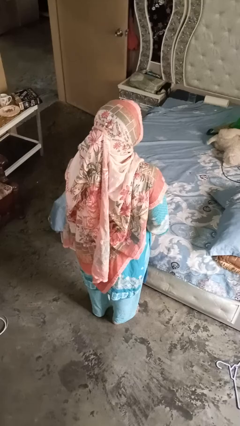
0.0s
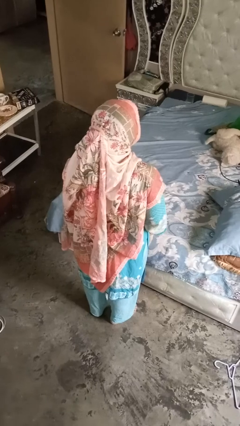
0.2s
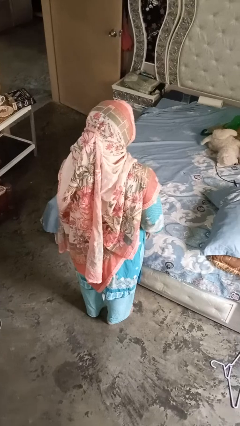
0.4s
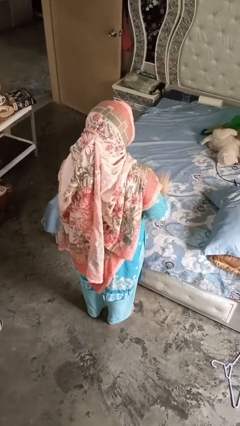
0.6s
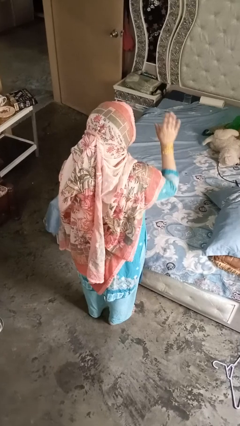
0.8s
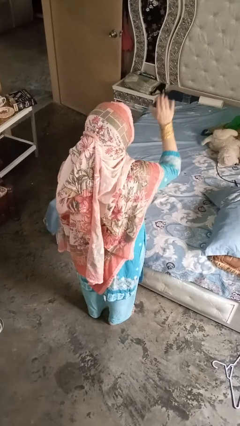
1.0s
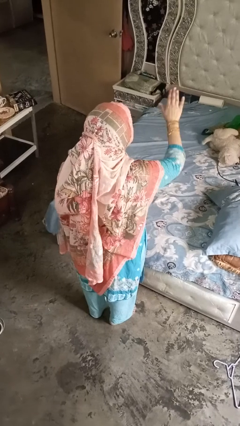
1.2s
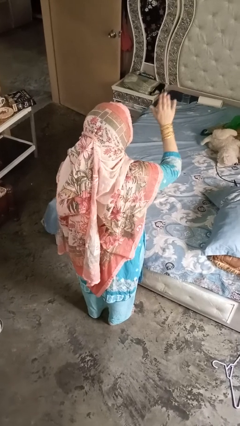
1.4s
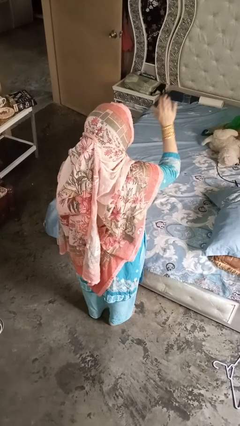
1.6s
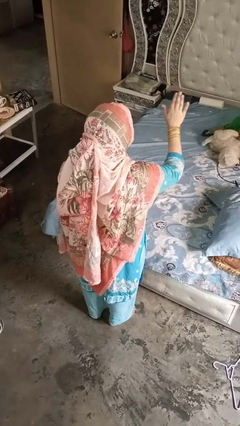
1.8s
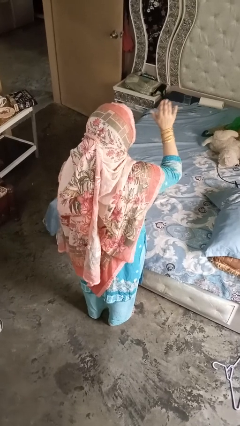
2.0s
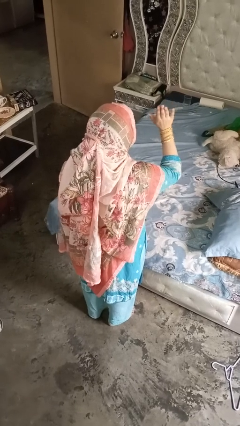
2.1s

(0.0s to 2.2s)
person gestures stop

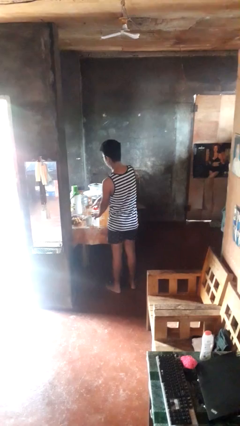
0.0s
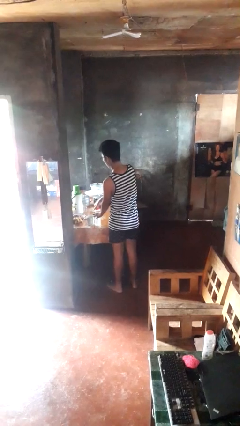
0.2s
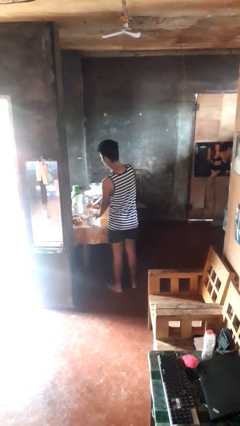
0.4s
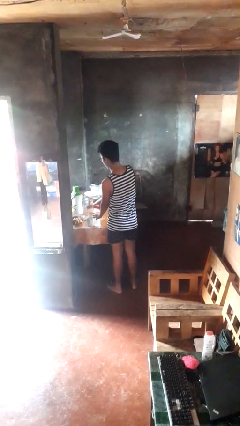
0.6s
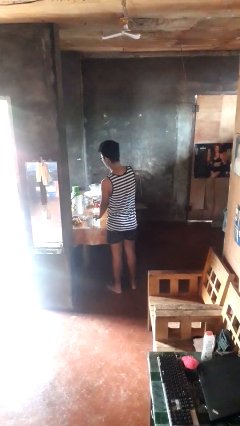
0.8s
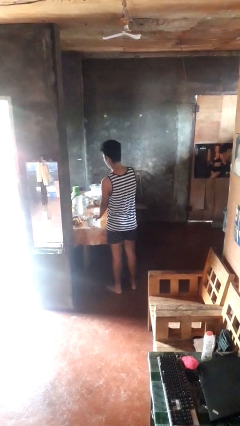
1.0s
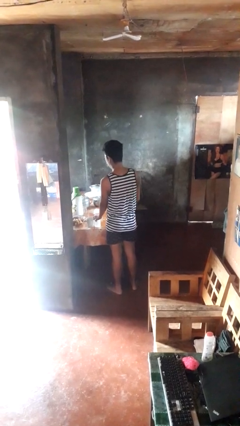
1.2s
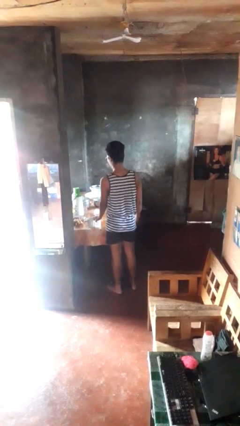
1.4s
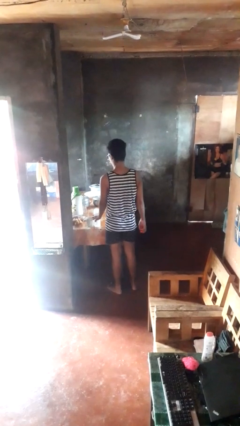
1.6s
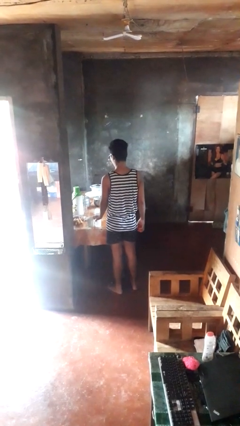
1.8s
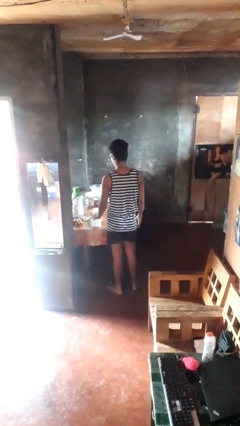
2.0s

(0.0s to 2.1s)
person unscrews lid from bottle

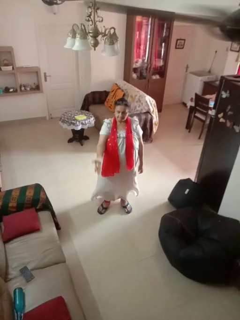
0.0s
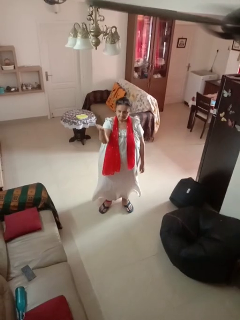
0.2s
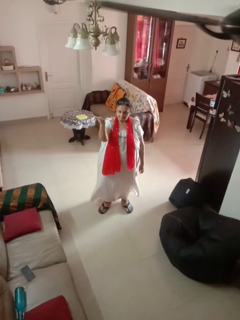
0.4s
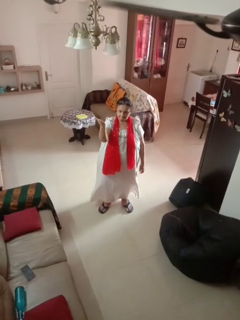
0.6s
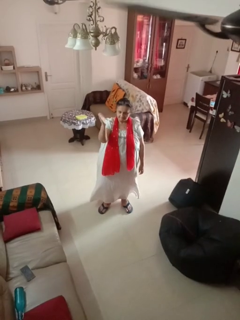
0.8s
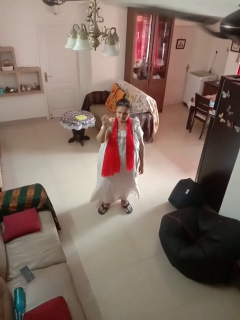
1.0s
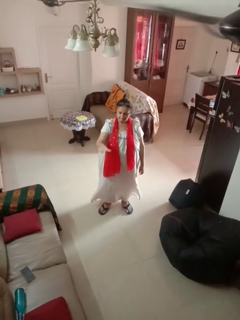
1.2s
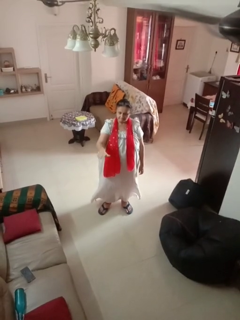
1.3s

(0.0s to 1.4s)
person gestures swipe up

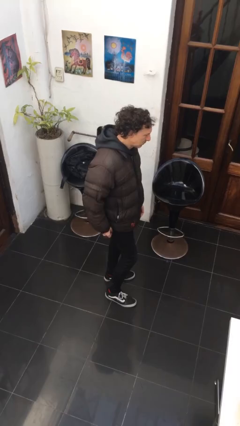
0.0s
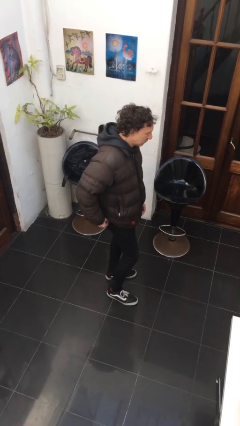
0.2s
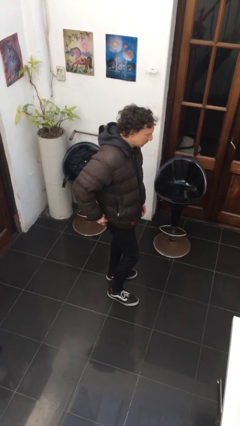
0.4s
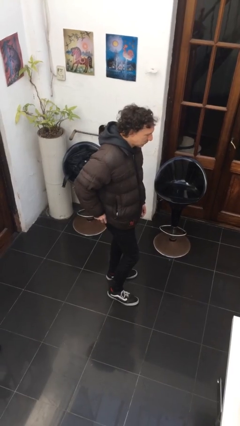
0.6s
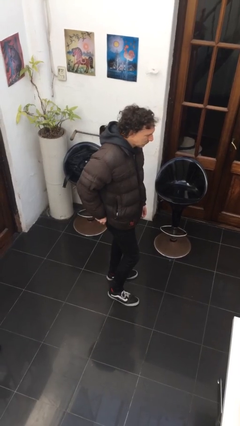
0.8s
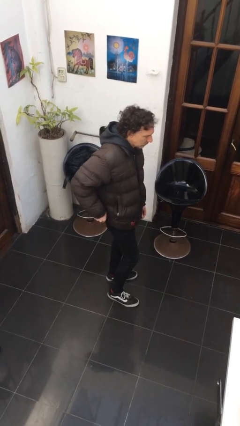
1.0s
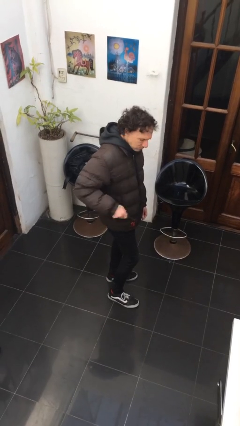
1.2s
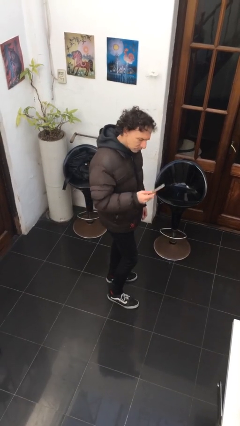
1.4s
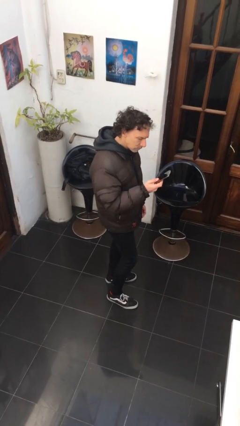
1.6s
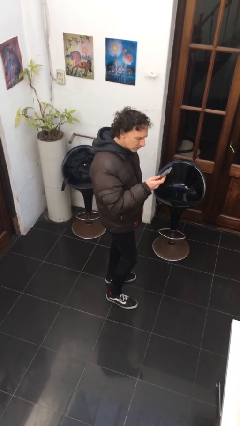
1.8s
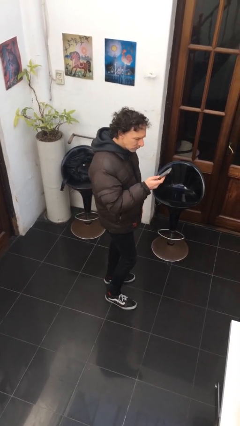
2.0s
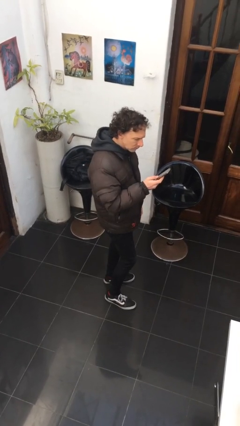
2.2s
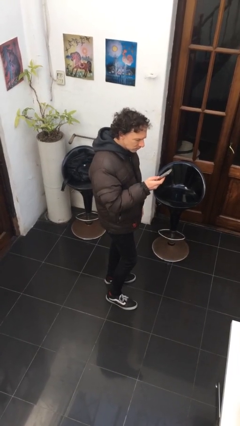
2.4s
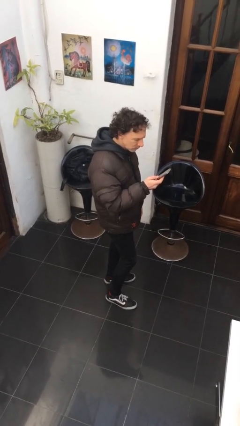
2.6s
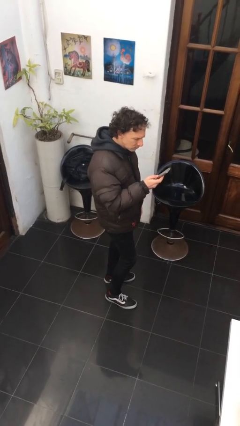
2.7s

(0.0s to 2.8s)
person takes phone from pocket

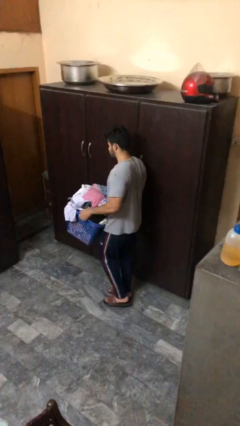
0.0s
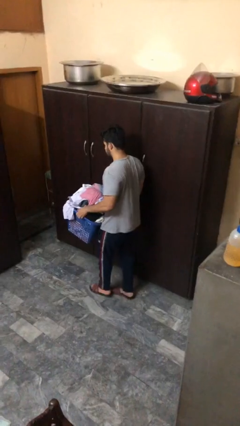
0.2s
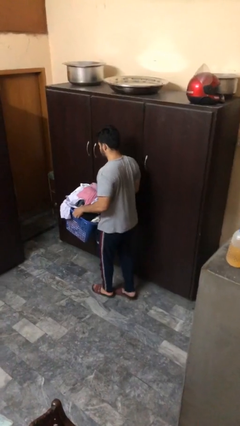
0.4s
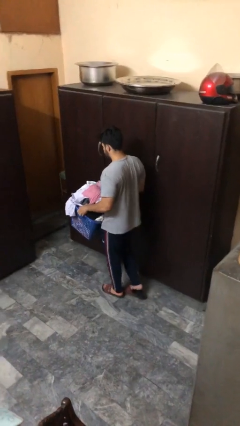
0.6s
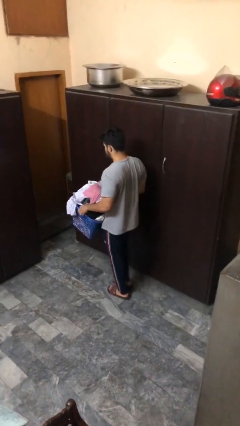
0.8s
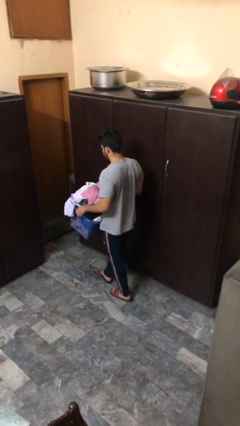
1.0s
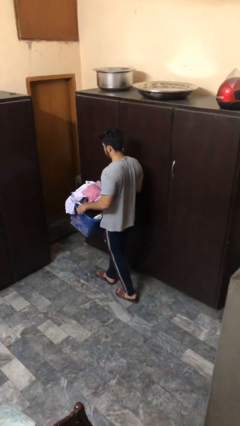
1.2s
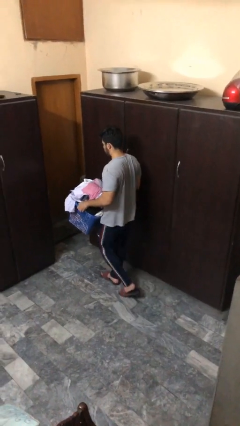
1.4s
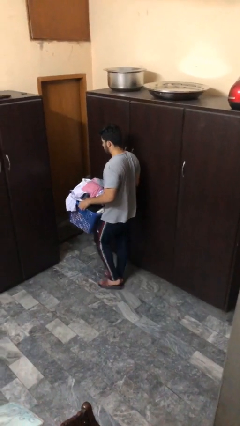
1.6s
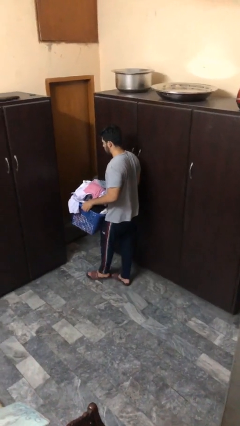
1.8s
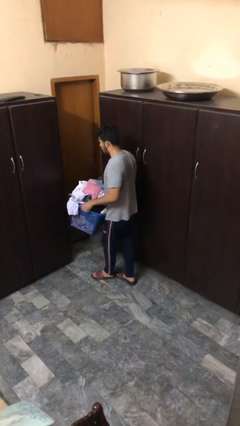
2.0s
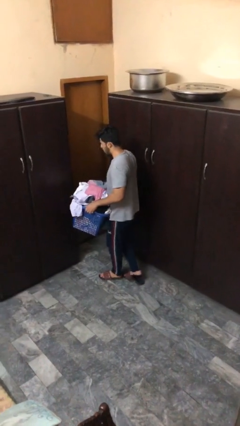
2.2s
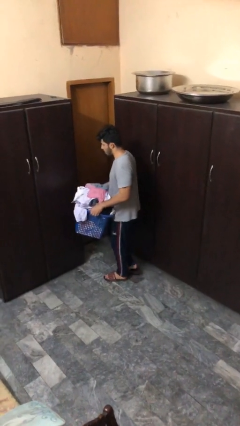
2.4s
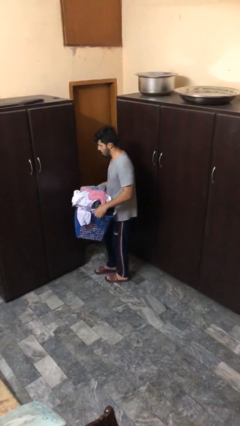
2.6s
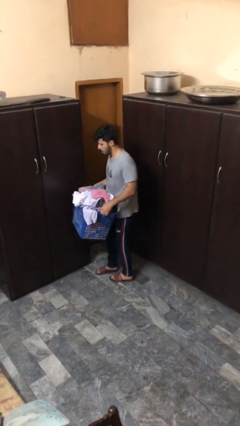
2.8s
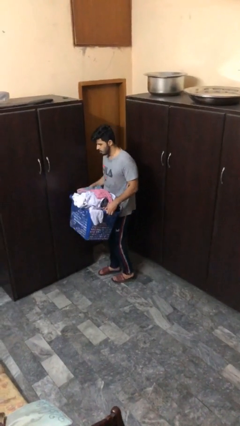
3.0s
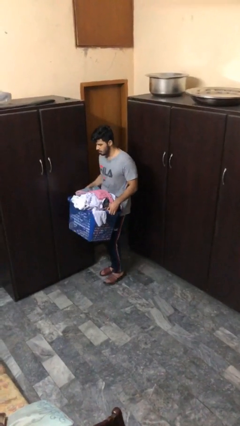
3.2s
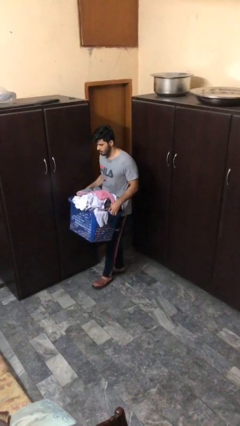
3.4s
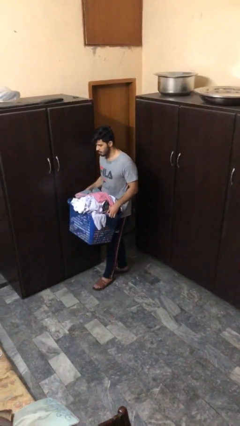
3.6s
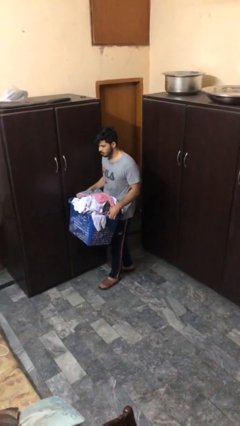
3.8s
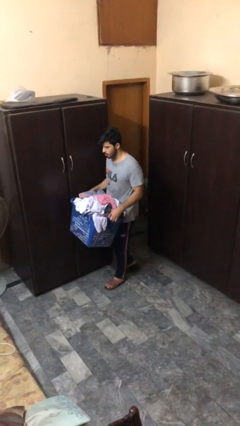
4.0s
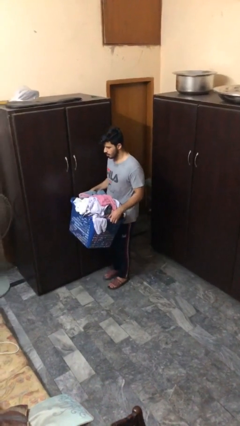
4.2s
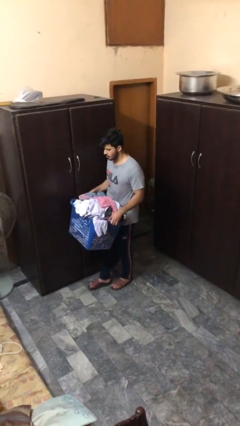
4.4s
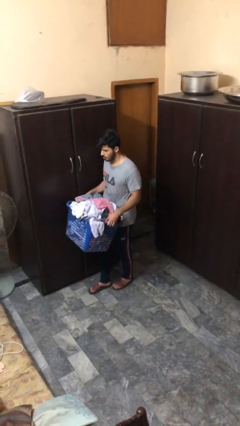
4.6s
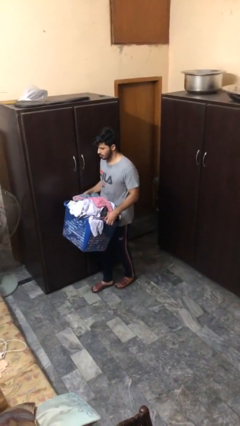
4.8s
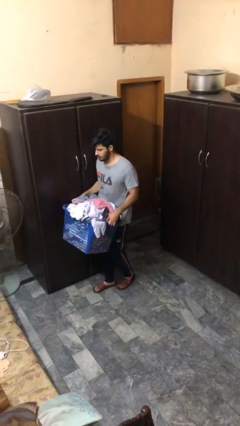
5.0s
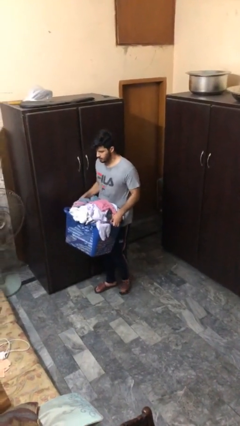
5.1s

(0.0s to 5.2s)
person carries laundry basket

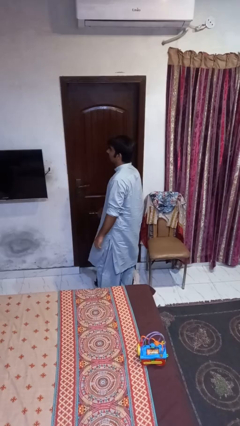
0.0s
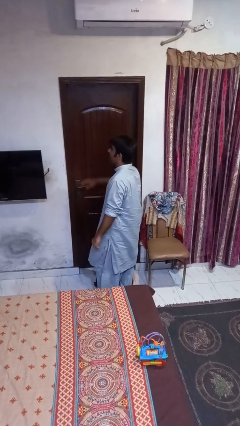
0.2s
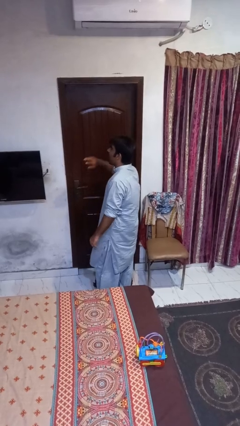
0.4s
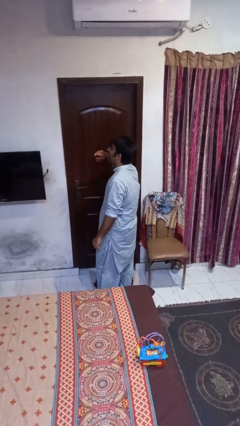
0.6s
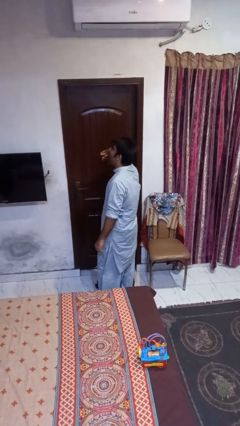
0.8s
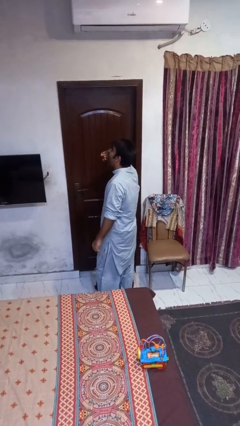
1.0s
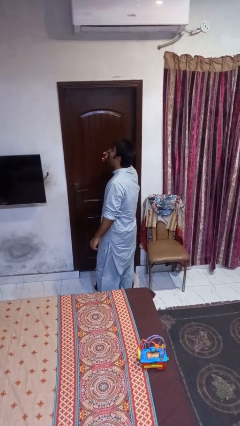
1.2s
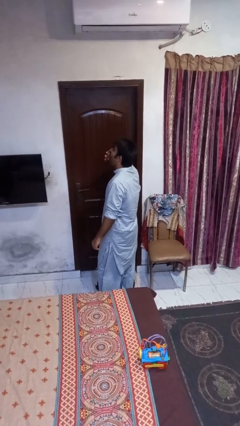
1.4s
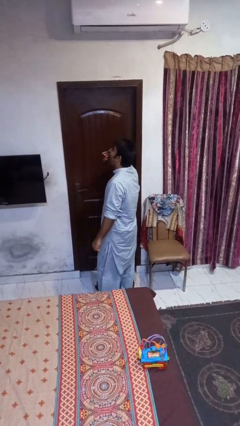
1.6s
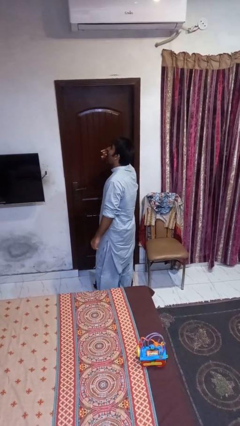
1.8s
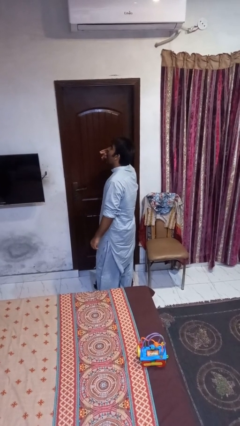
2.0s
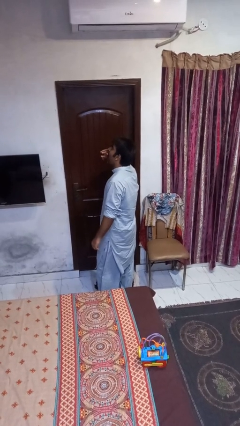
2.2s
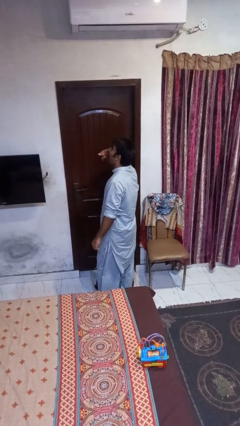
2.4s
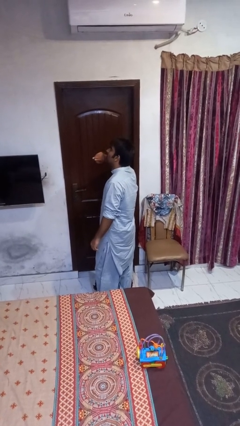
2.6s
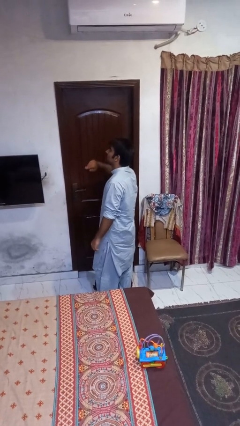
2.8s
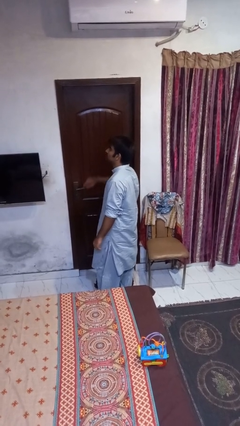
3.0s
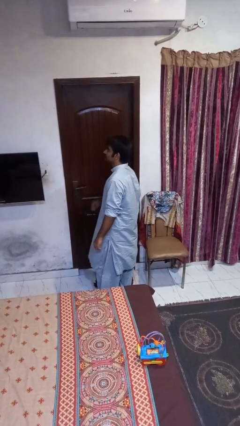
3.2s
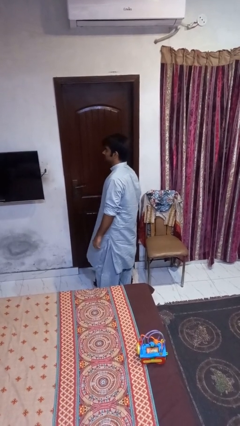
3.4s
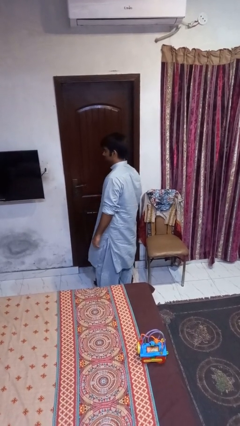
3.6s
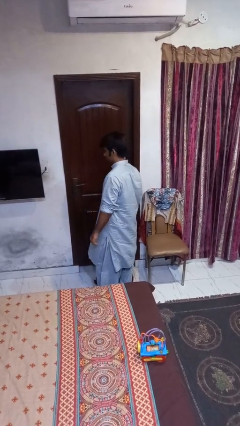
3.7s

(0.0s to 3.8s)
person yawns

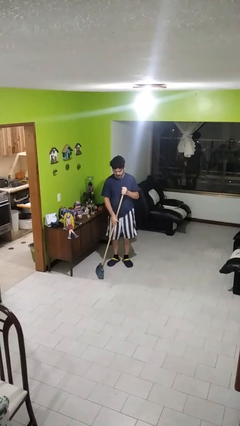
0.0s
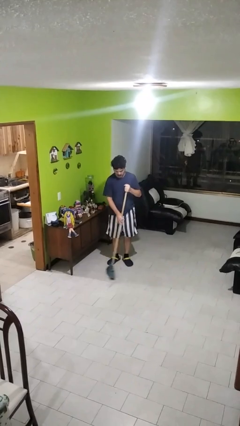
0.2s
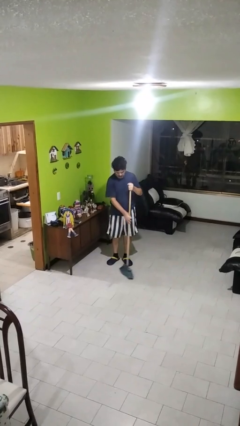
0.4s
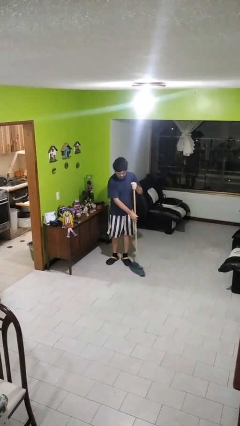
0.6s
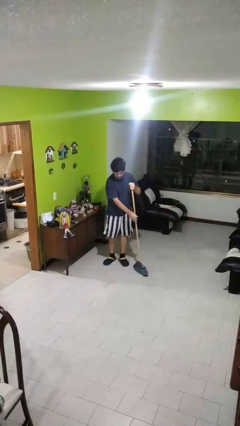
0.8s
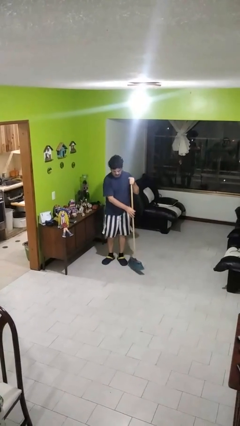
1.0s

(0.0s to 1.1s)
person sweeps floor
